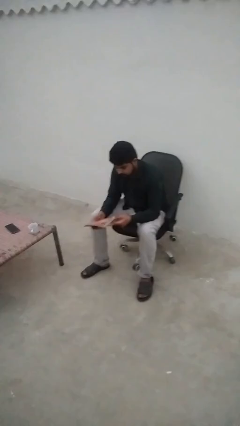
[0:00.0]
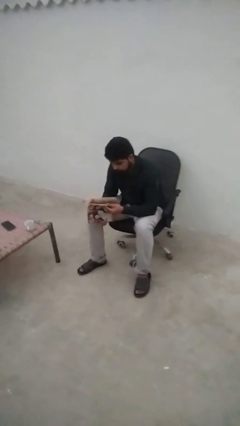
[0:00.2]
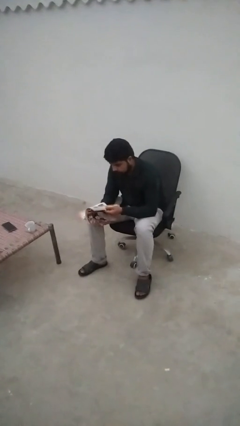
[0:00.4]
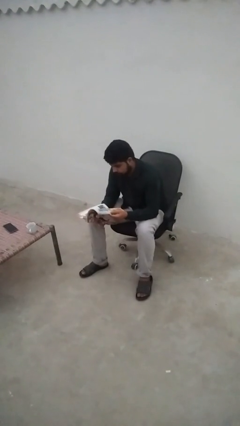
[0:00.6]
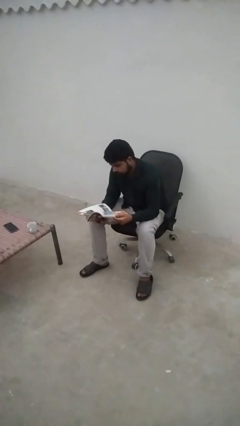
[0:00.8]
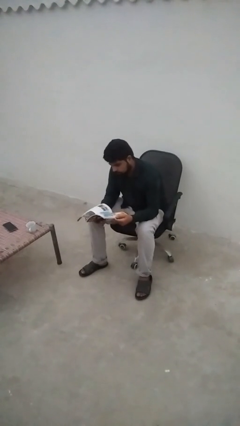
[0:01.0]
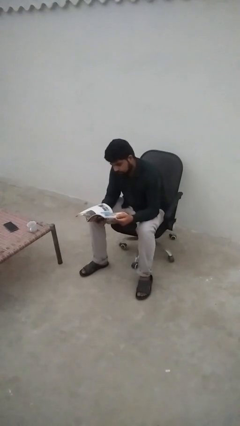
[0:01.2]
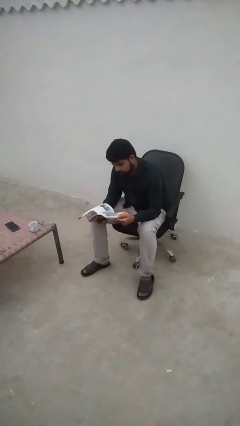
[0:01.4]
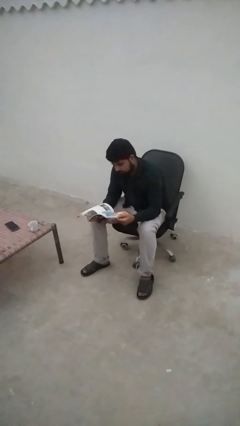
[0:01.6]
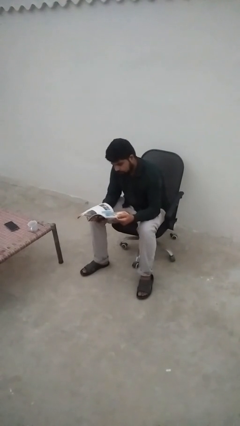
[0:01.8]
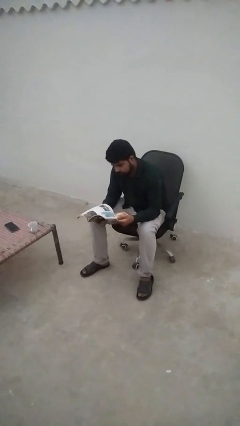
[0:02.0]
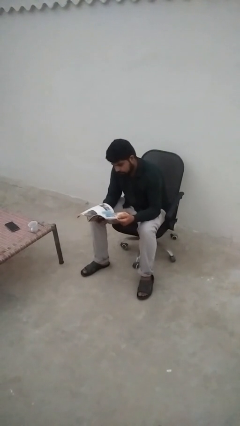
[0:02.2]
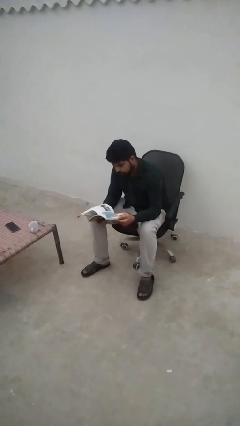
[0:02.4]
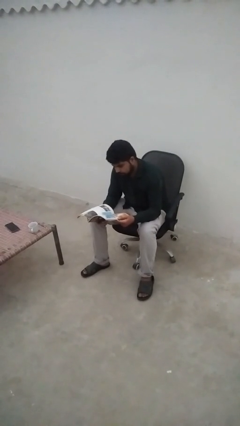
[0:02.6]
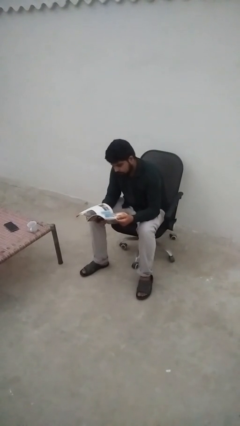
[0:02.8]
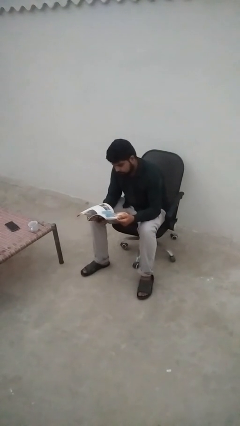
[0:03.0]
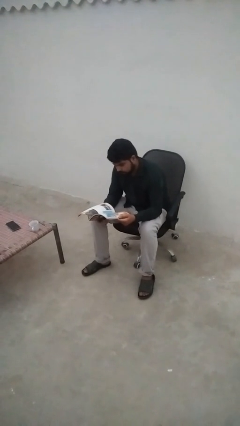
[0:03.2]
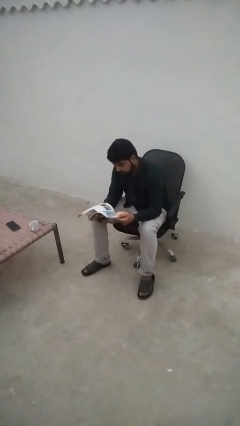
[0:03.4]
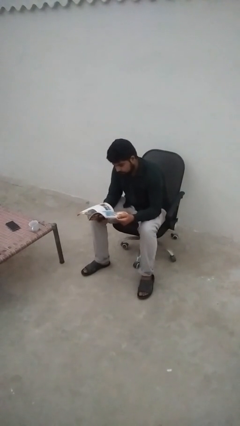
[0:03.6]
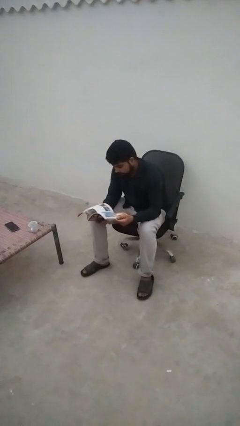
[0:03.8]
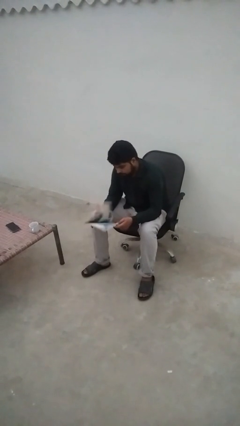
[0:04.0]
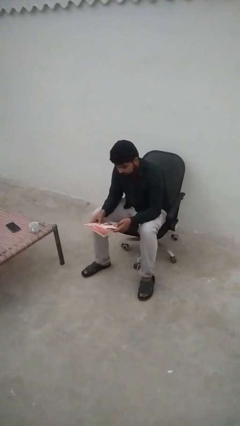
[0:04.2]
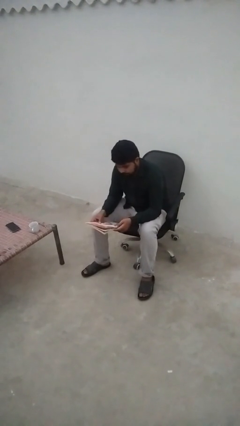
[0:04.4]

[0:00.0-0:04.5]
person reads magazine

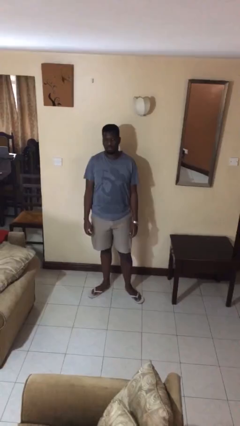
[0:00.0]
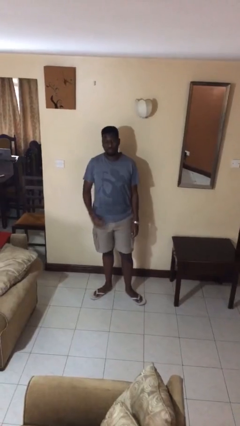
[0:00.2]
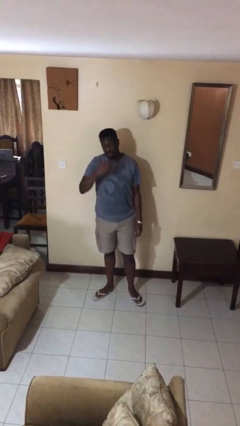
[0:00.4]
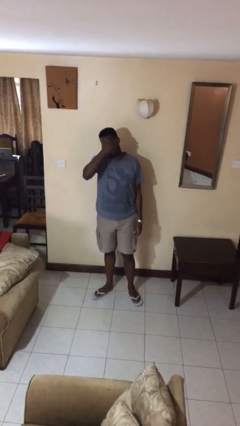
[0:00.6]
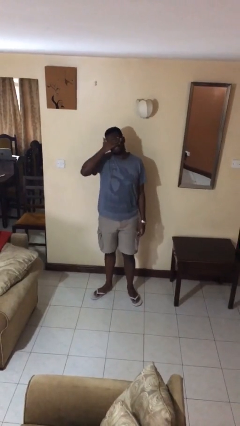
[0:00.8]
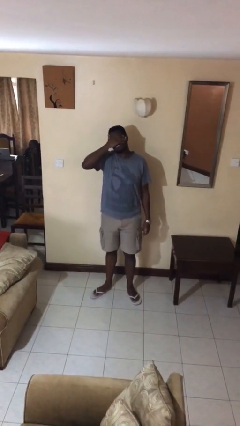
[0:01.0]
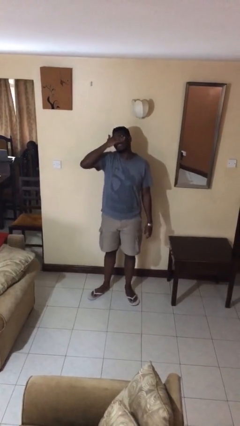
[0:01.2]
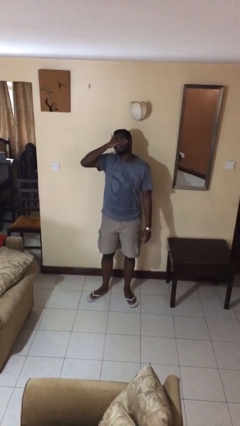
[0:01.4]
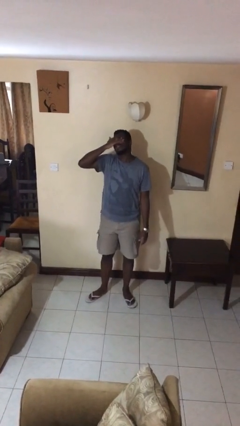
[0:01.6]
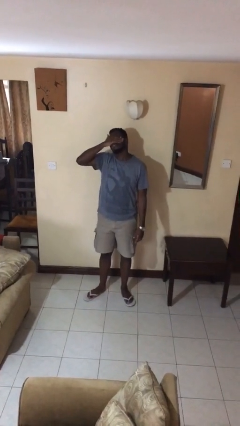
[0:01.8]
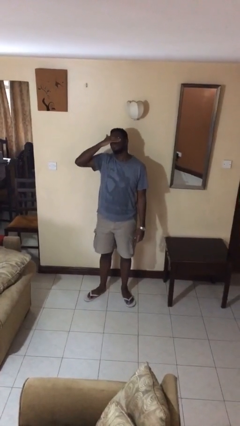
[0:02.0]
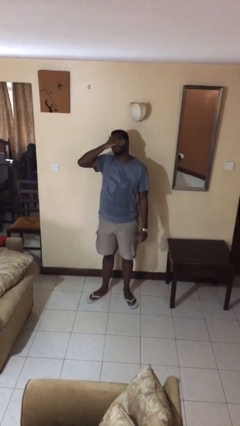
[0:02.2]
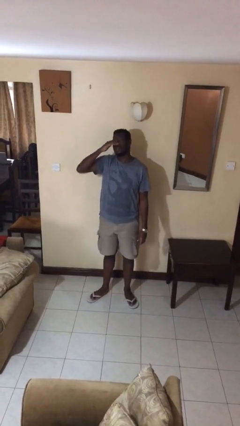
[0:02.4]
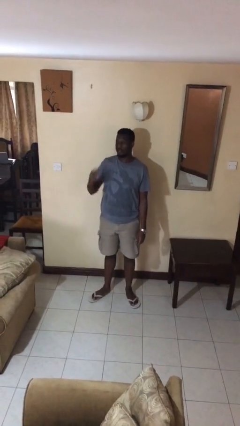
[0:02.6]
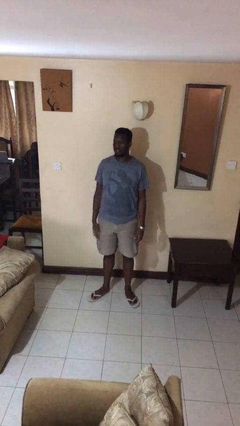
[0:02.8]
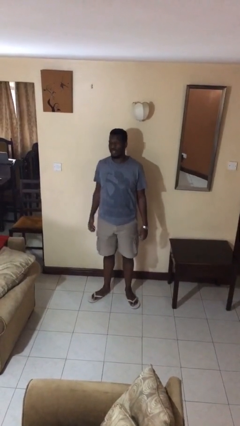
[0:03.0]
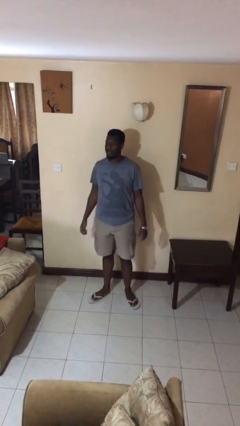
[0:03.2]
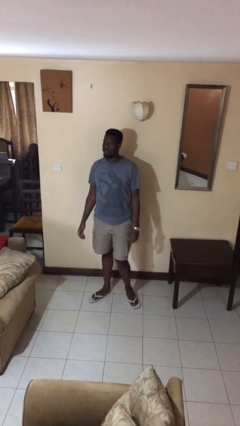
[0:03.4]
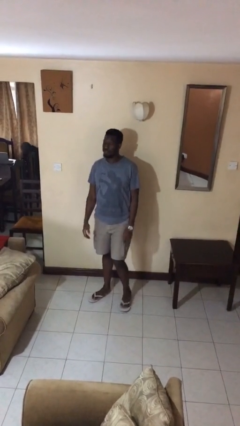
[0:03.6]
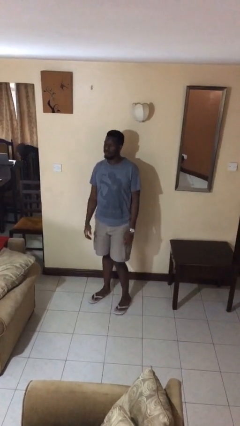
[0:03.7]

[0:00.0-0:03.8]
person rubs eyes

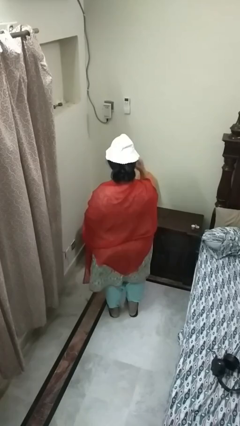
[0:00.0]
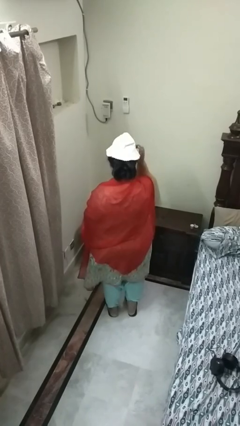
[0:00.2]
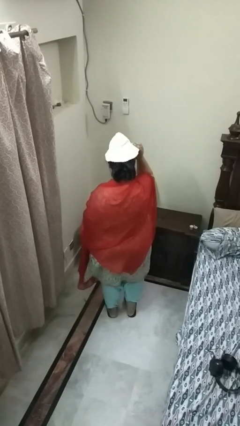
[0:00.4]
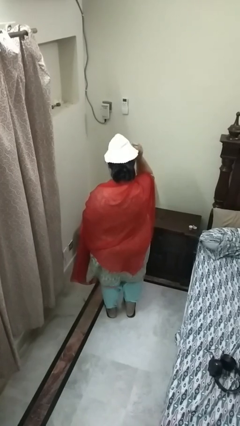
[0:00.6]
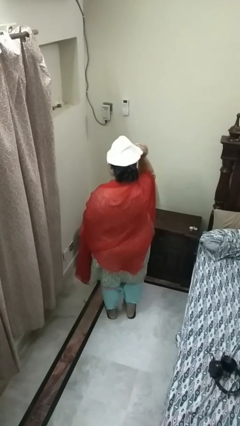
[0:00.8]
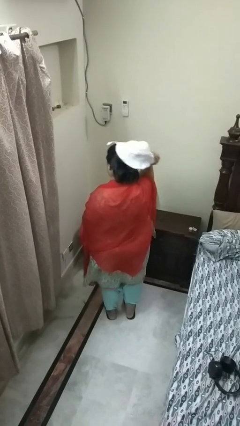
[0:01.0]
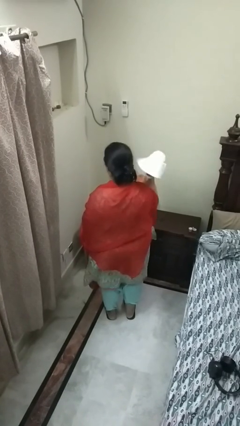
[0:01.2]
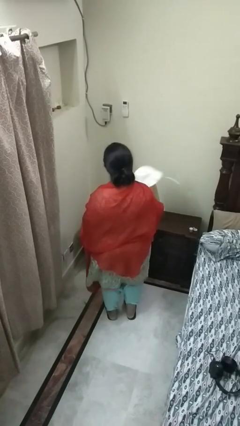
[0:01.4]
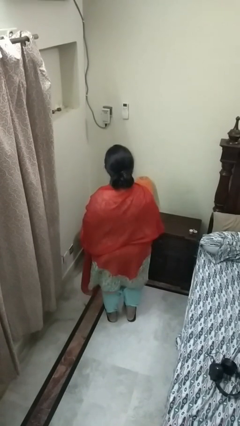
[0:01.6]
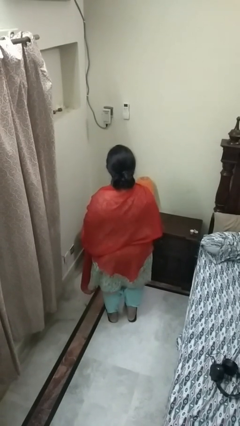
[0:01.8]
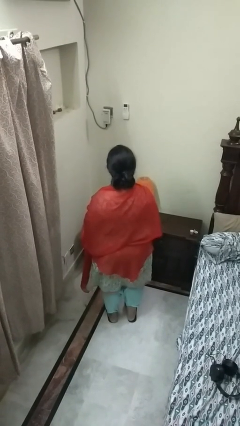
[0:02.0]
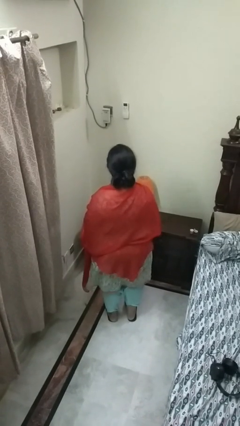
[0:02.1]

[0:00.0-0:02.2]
person takes off hat

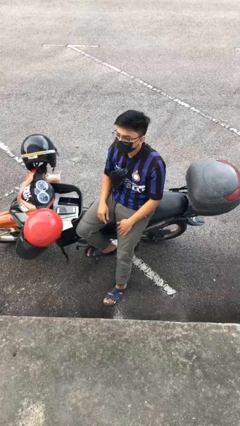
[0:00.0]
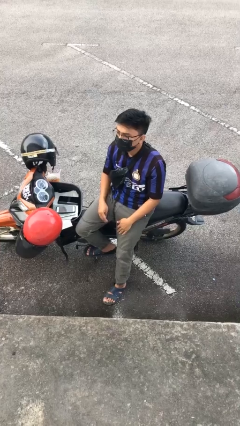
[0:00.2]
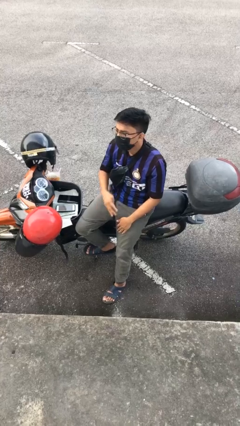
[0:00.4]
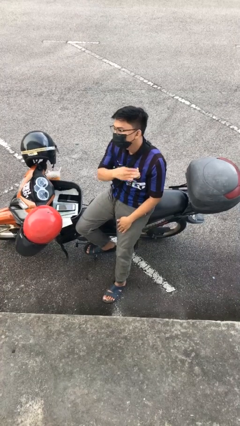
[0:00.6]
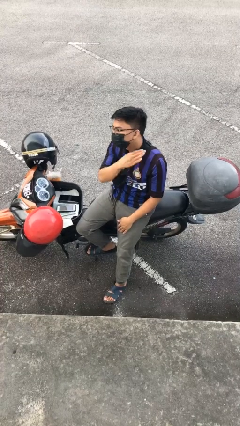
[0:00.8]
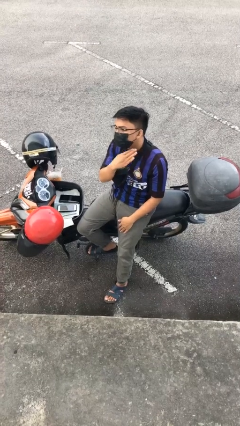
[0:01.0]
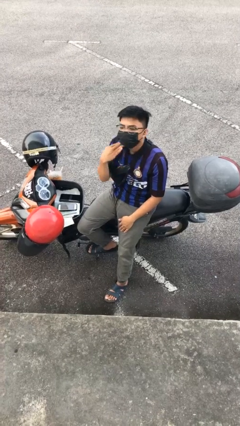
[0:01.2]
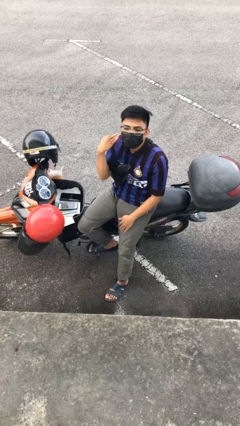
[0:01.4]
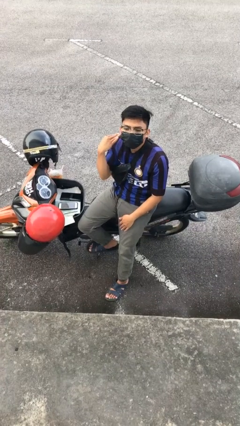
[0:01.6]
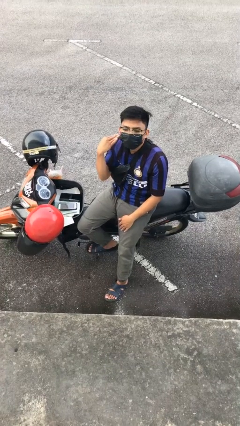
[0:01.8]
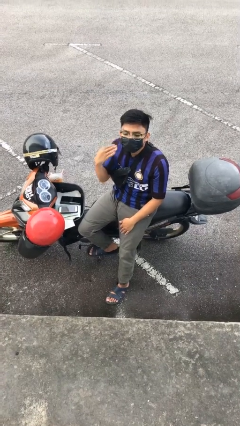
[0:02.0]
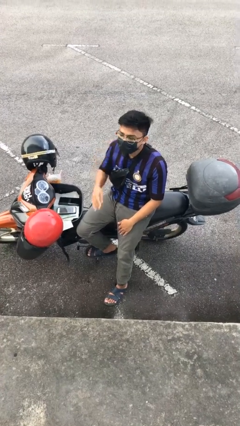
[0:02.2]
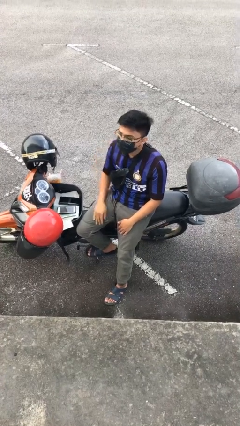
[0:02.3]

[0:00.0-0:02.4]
person gestures cut

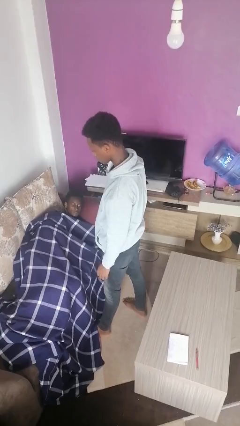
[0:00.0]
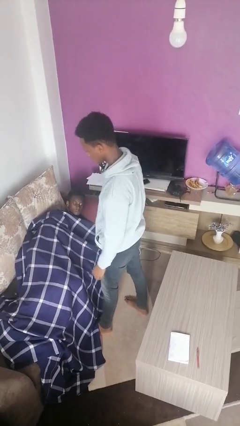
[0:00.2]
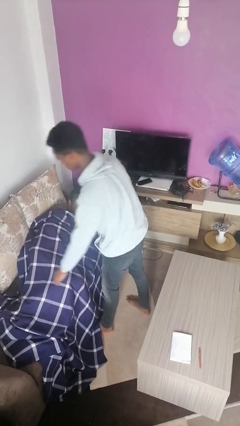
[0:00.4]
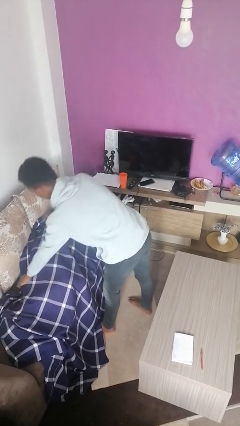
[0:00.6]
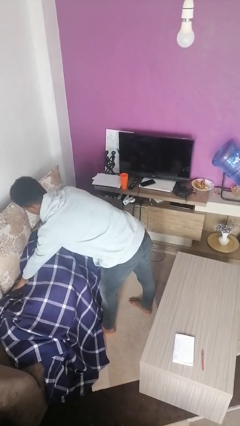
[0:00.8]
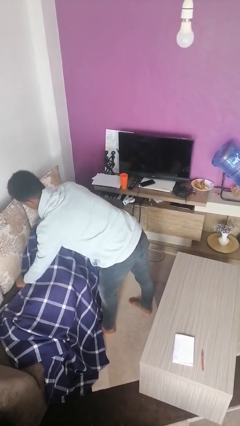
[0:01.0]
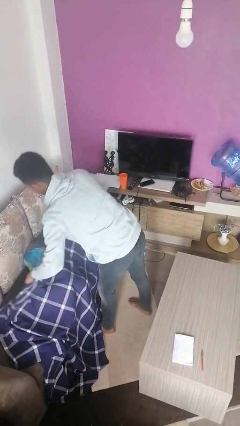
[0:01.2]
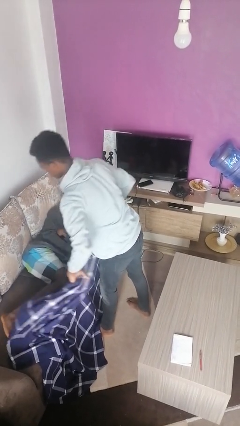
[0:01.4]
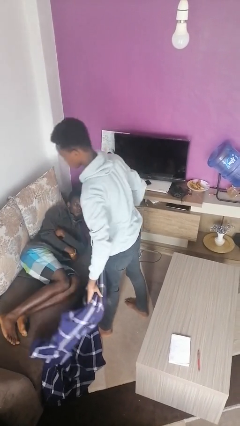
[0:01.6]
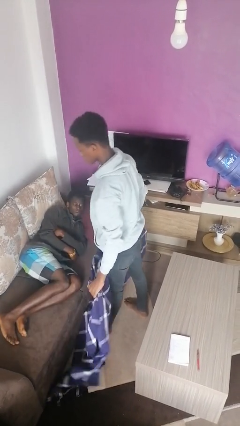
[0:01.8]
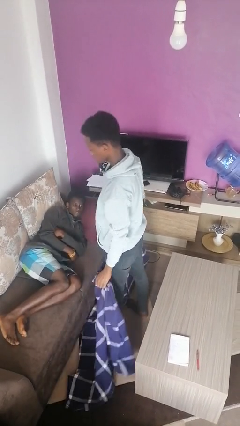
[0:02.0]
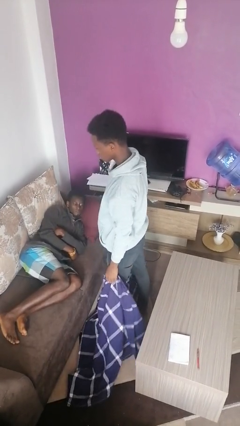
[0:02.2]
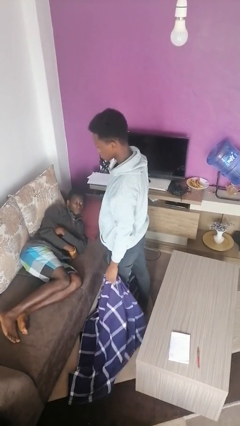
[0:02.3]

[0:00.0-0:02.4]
person uncovers friend with blanket

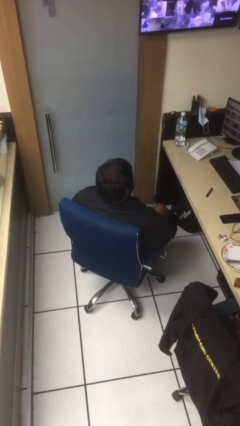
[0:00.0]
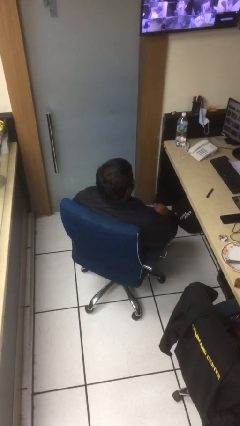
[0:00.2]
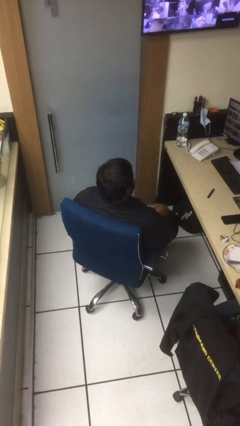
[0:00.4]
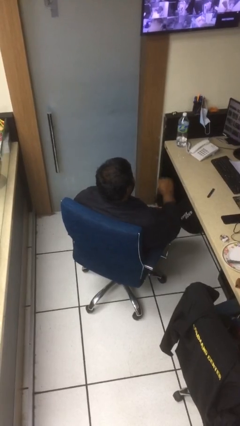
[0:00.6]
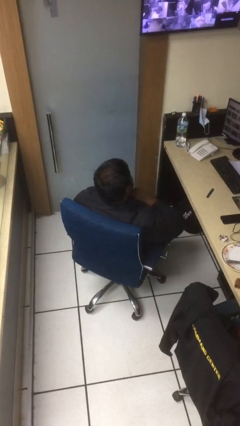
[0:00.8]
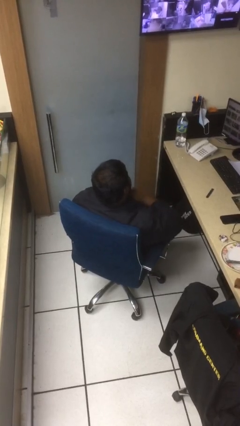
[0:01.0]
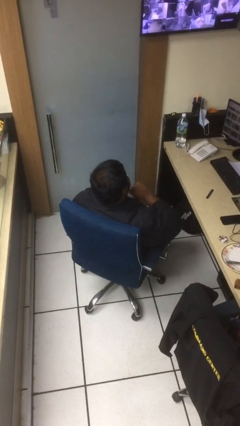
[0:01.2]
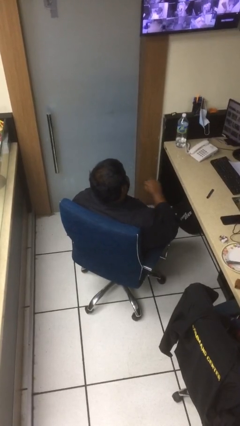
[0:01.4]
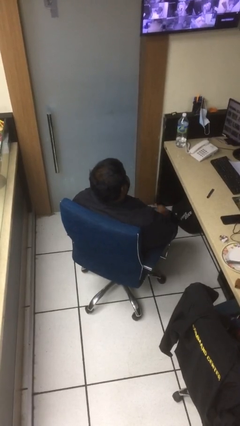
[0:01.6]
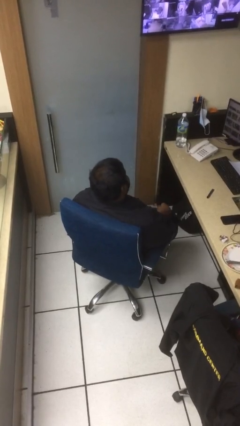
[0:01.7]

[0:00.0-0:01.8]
person drums on chest
